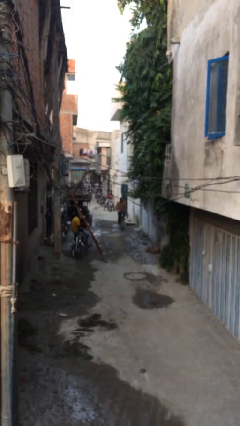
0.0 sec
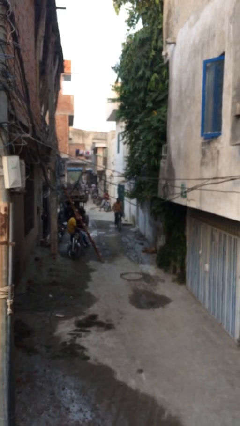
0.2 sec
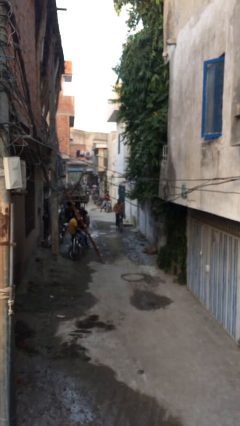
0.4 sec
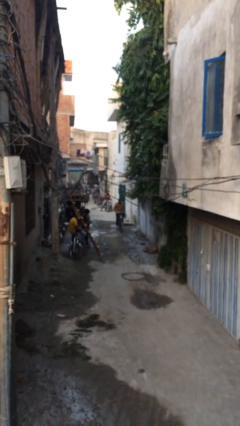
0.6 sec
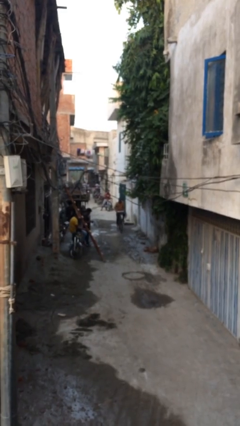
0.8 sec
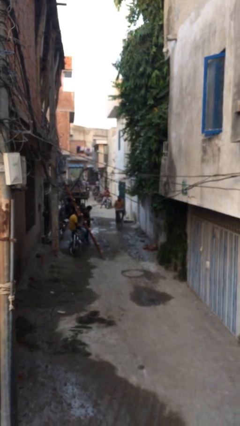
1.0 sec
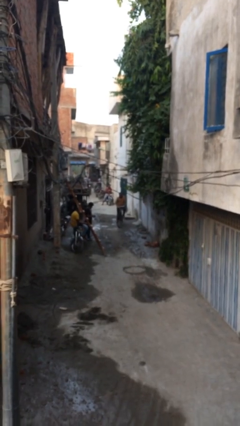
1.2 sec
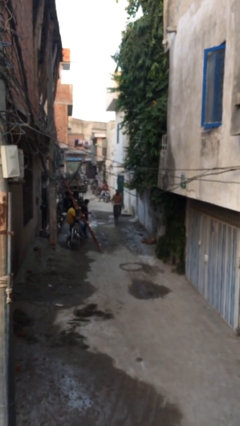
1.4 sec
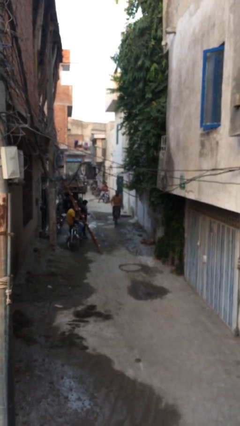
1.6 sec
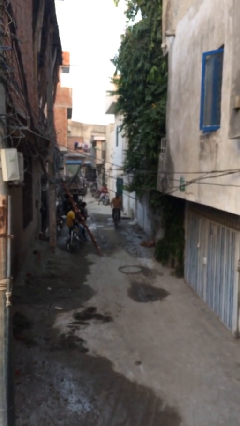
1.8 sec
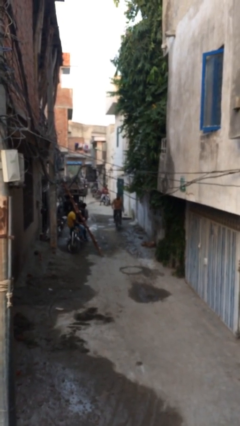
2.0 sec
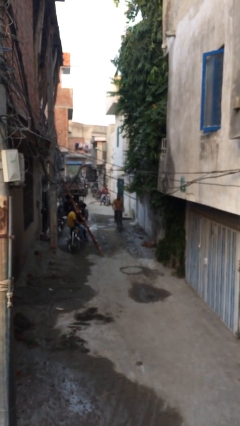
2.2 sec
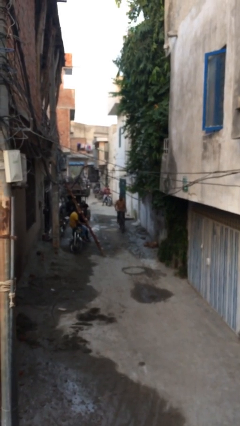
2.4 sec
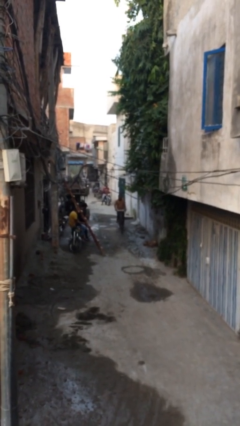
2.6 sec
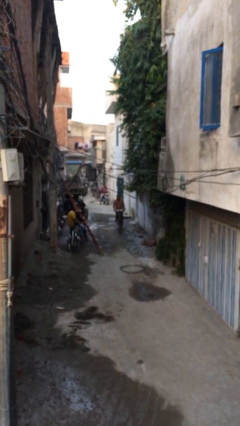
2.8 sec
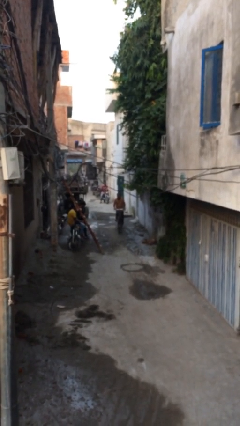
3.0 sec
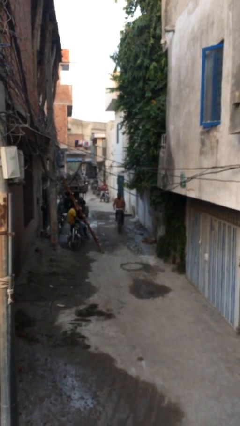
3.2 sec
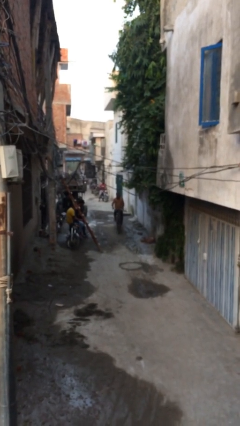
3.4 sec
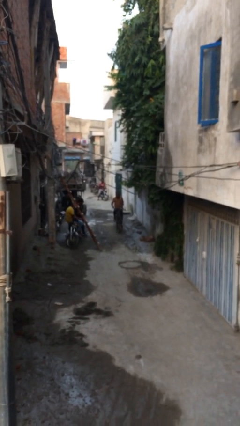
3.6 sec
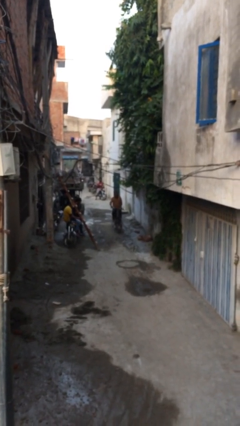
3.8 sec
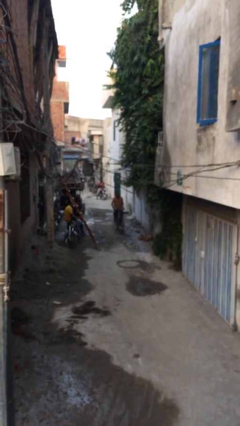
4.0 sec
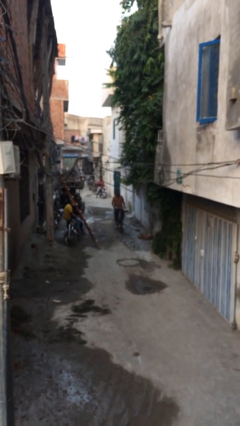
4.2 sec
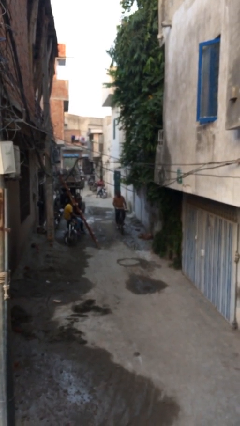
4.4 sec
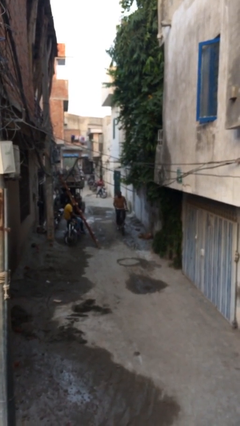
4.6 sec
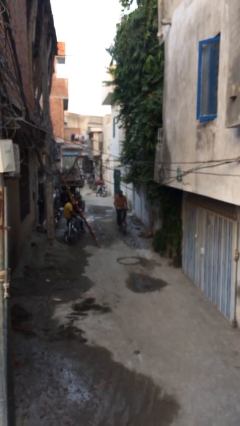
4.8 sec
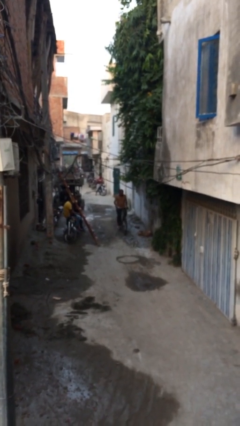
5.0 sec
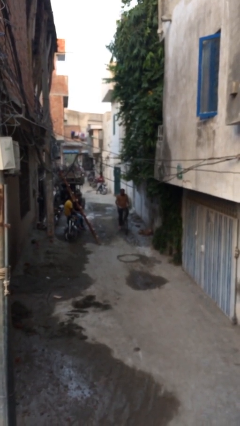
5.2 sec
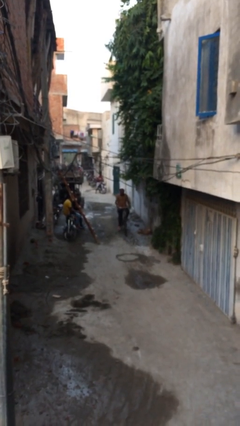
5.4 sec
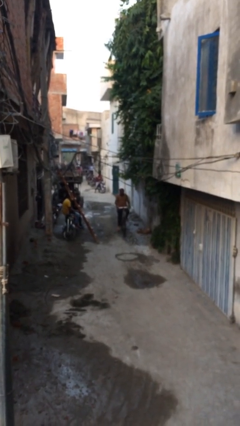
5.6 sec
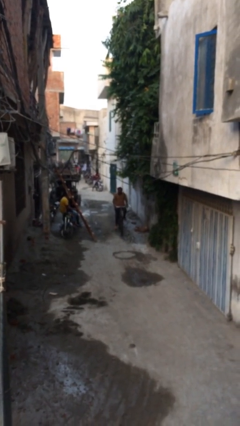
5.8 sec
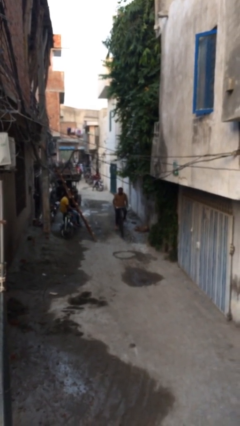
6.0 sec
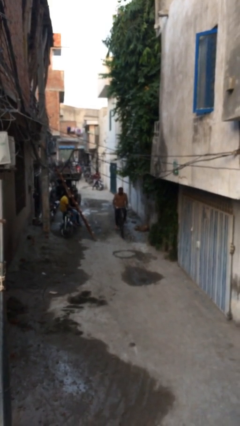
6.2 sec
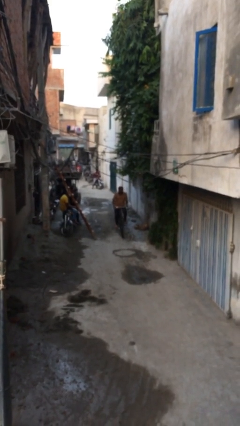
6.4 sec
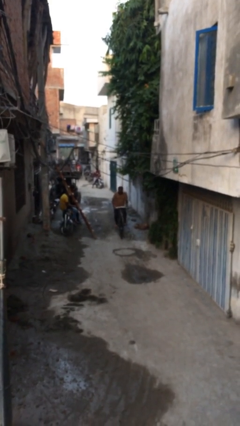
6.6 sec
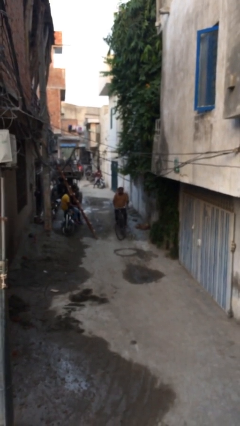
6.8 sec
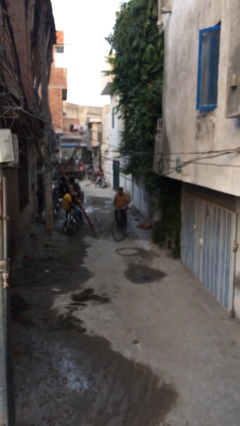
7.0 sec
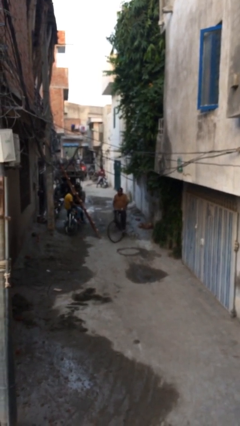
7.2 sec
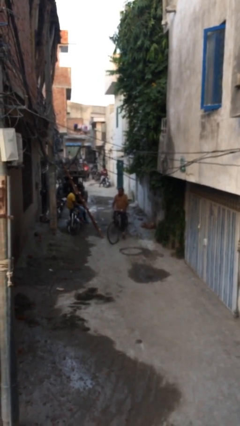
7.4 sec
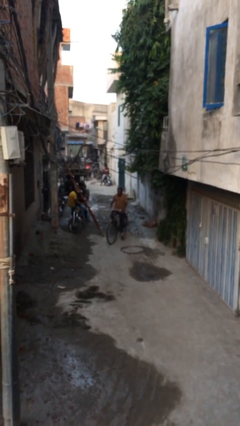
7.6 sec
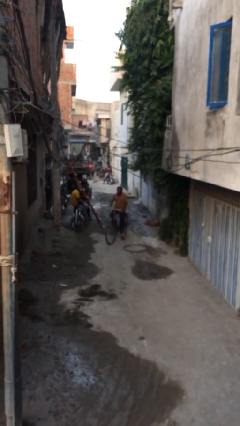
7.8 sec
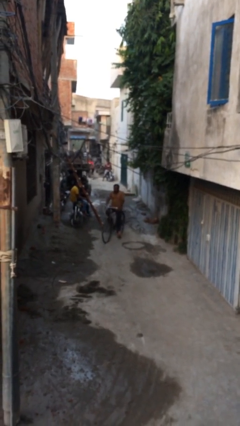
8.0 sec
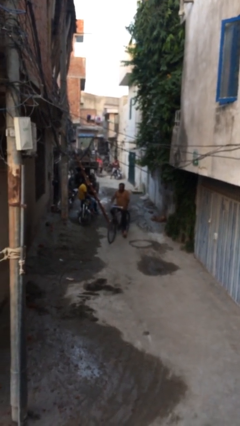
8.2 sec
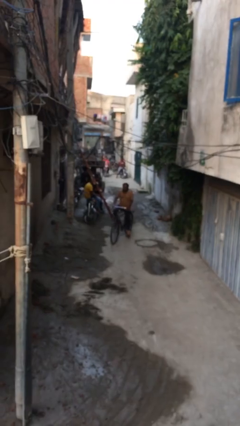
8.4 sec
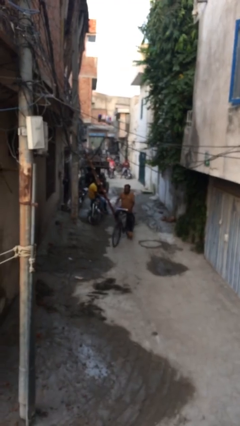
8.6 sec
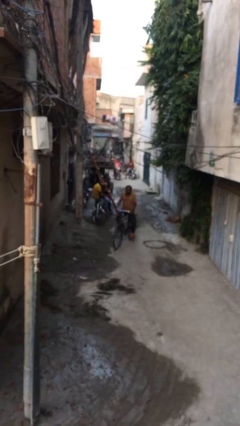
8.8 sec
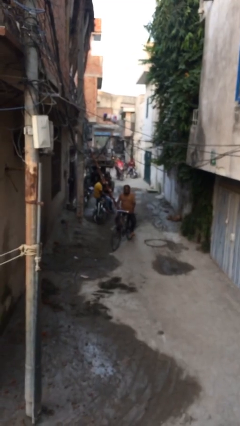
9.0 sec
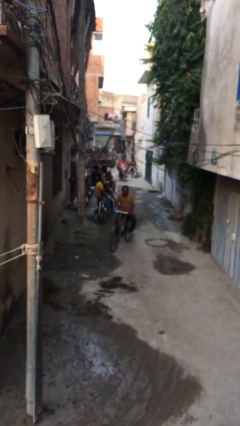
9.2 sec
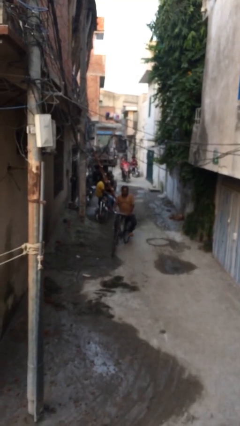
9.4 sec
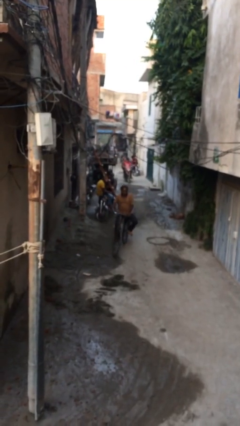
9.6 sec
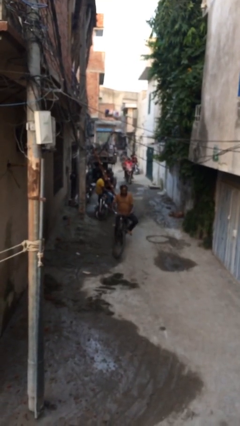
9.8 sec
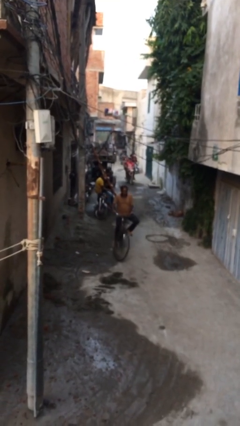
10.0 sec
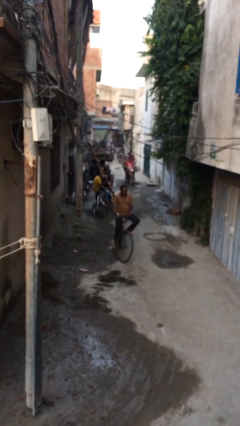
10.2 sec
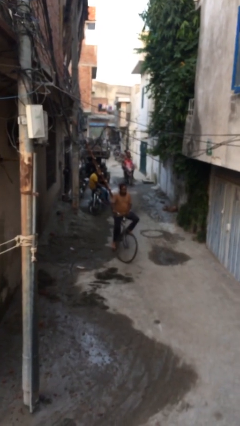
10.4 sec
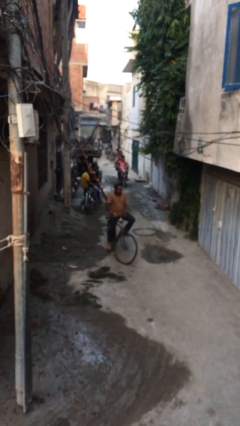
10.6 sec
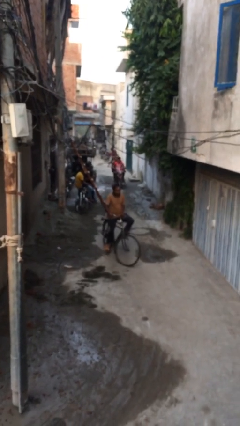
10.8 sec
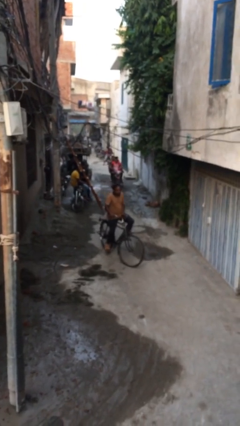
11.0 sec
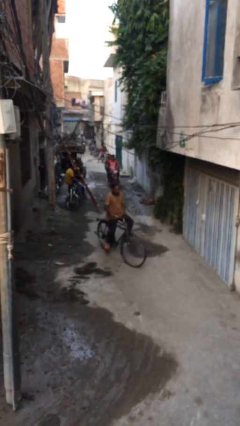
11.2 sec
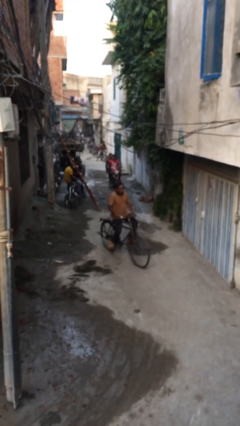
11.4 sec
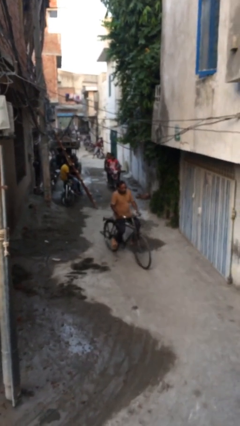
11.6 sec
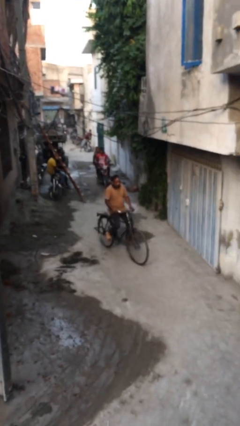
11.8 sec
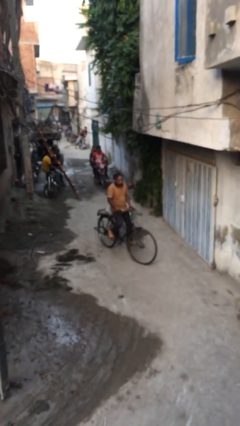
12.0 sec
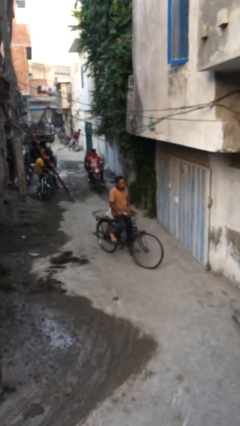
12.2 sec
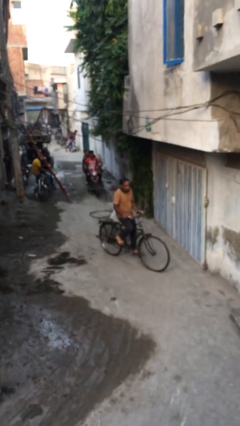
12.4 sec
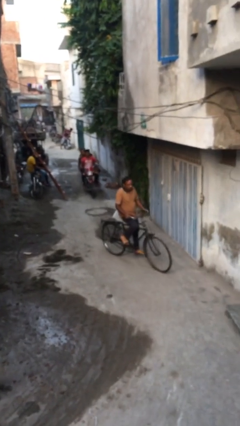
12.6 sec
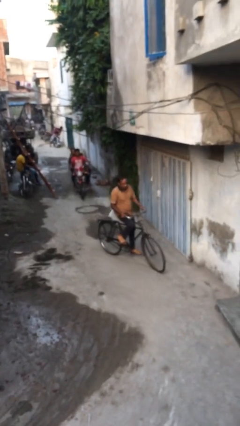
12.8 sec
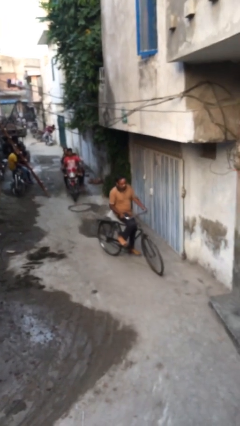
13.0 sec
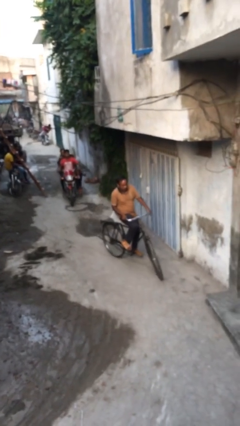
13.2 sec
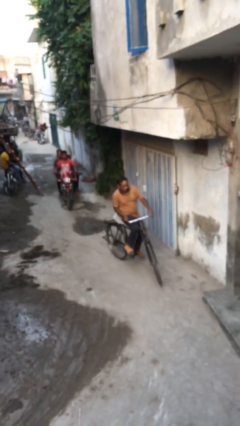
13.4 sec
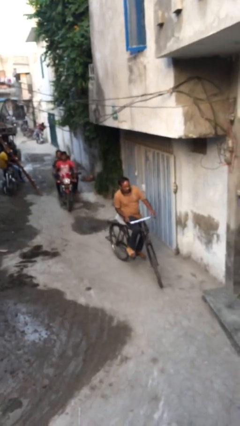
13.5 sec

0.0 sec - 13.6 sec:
person rides bicycle

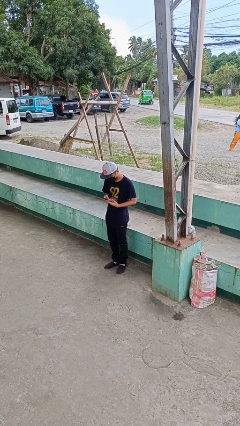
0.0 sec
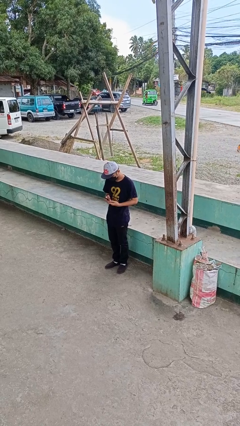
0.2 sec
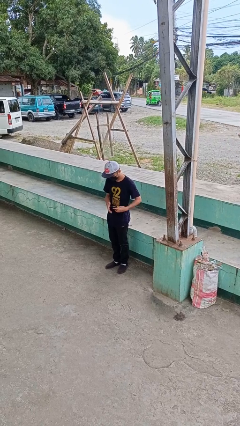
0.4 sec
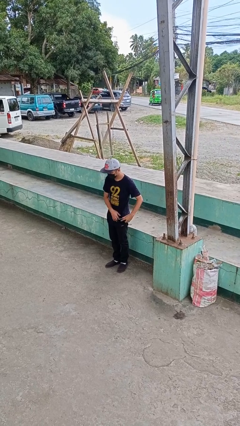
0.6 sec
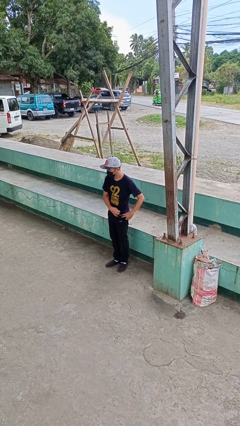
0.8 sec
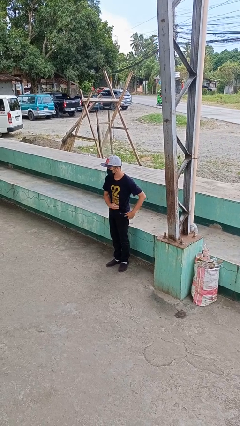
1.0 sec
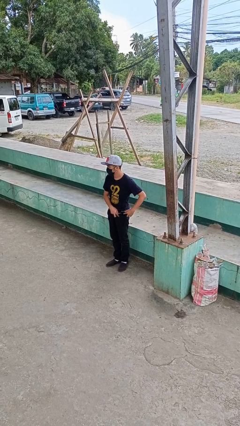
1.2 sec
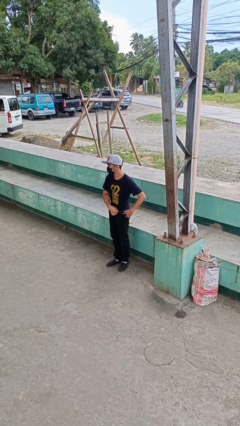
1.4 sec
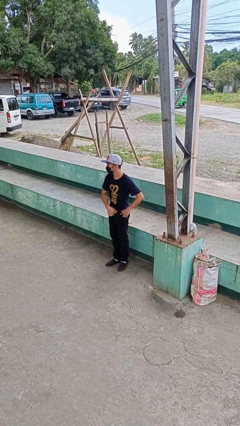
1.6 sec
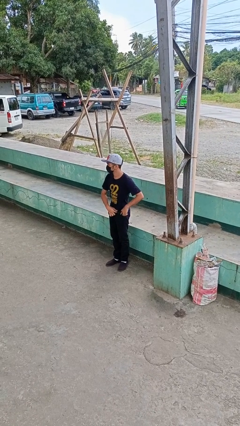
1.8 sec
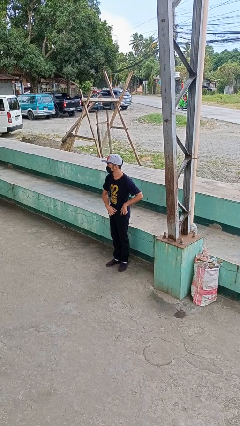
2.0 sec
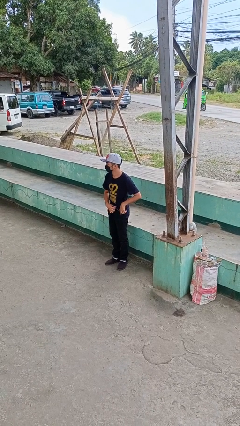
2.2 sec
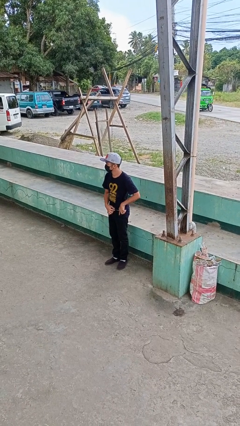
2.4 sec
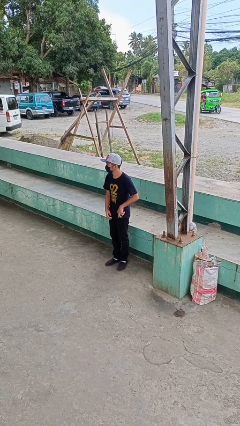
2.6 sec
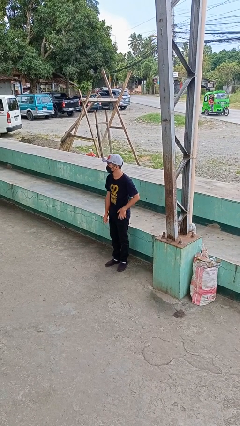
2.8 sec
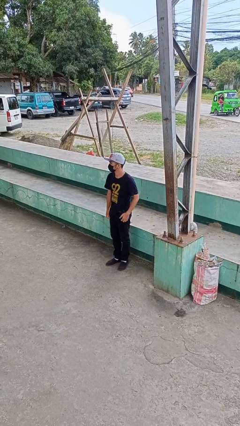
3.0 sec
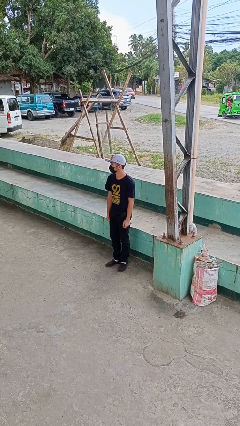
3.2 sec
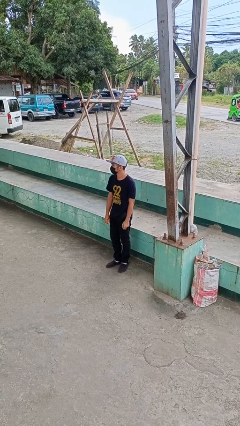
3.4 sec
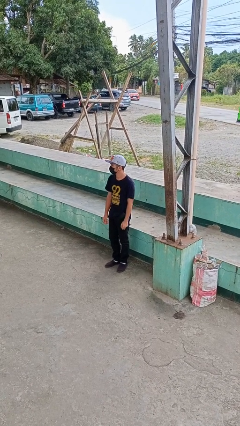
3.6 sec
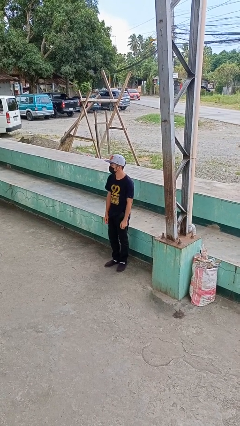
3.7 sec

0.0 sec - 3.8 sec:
person puts phone into pocket

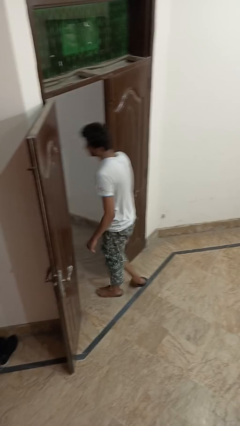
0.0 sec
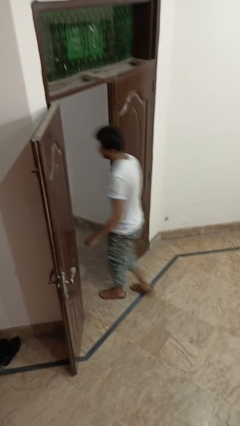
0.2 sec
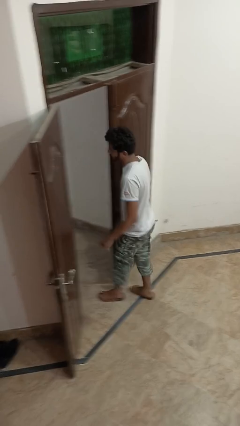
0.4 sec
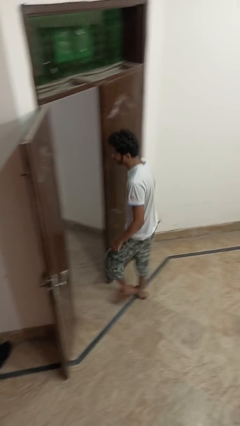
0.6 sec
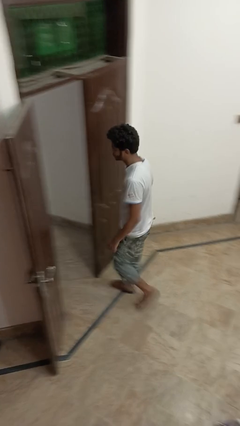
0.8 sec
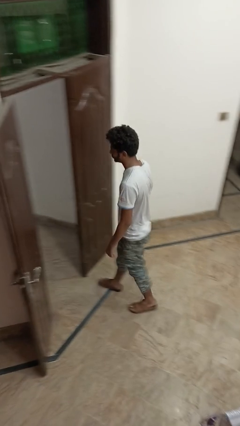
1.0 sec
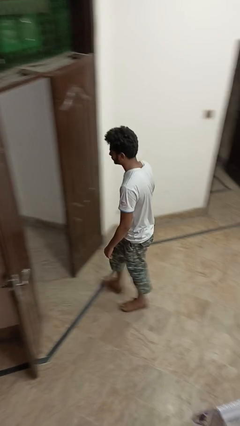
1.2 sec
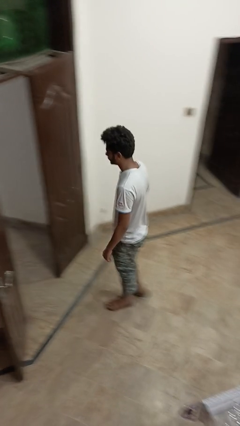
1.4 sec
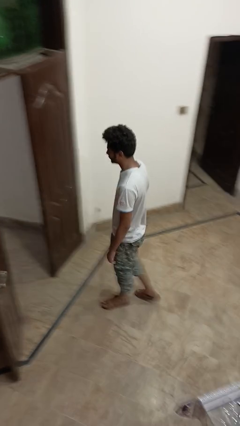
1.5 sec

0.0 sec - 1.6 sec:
person bumps into wall
